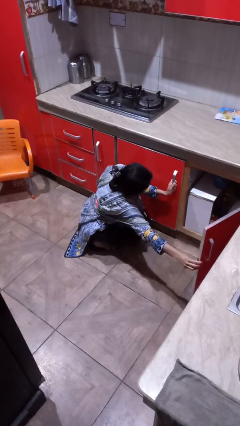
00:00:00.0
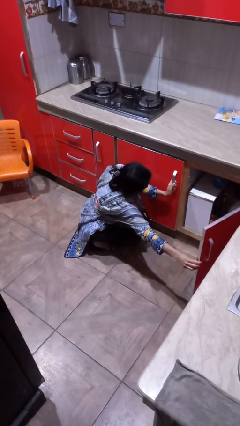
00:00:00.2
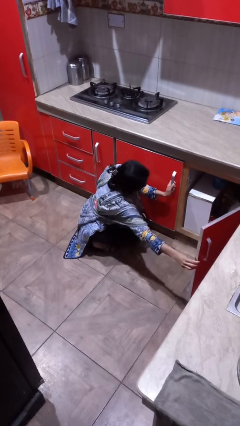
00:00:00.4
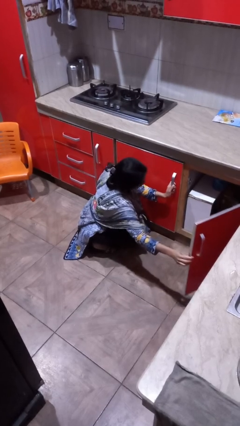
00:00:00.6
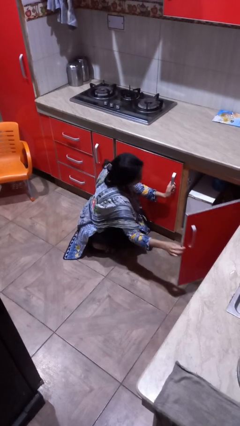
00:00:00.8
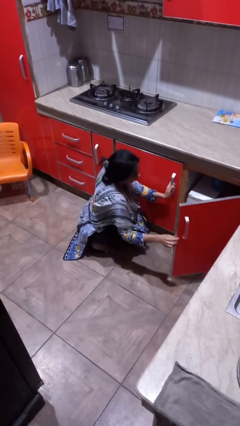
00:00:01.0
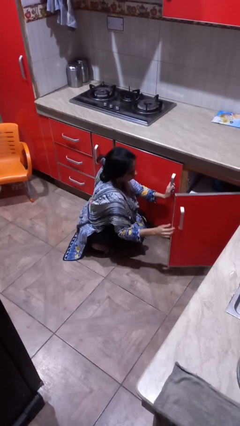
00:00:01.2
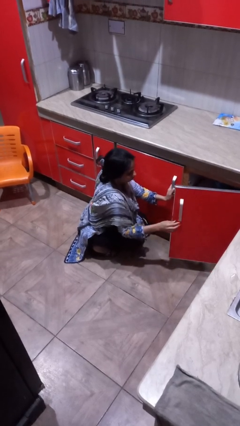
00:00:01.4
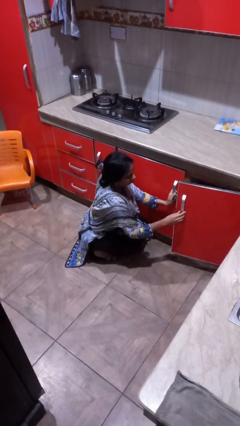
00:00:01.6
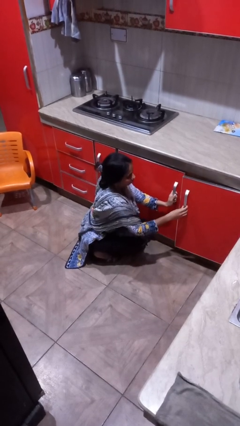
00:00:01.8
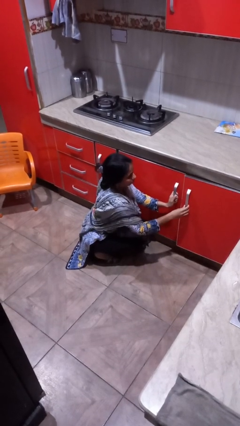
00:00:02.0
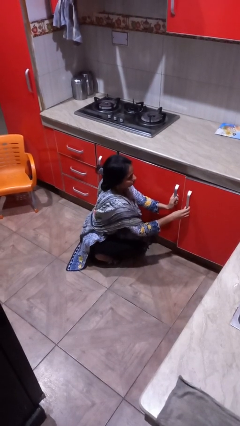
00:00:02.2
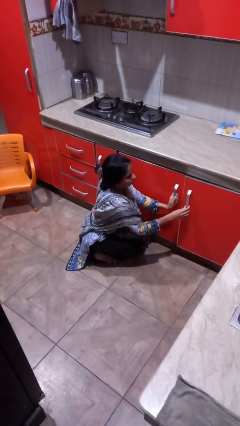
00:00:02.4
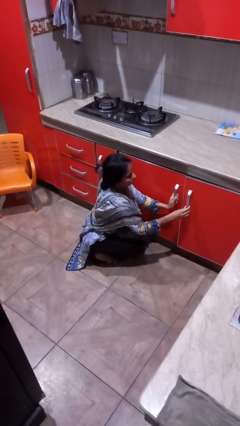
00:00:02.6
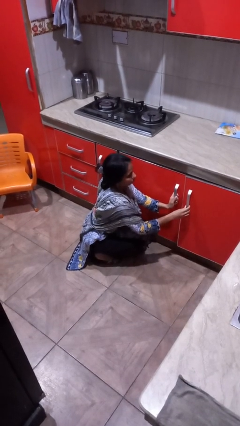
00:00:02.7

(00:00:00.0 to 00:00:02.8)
person closes cabinet

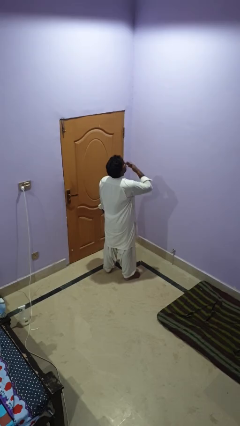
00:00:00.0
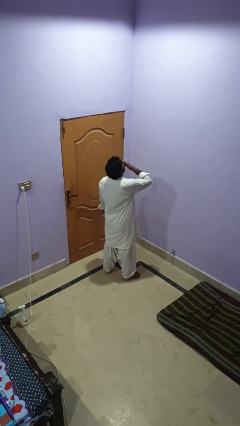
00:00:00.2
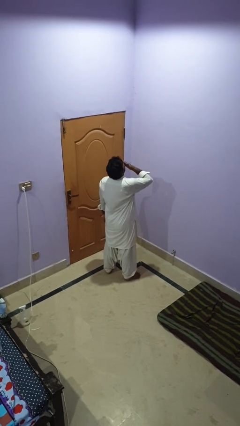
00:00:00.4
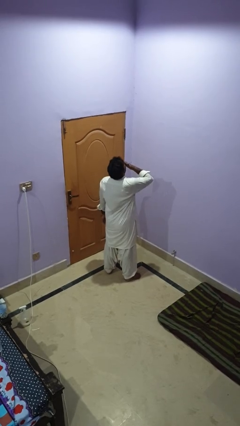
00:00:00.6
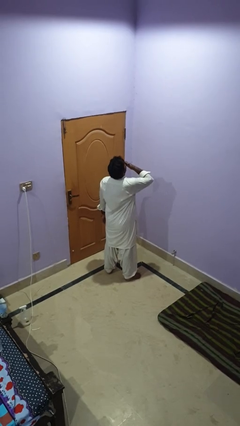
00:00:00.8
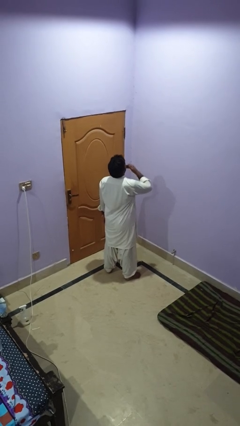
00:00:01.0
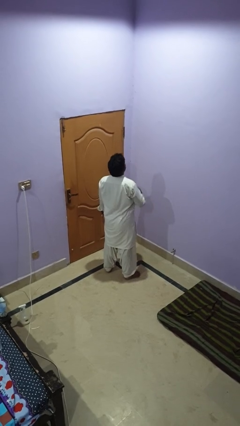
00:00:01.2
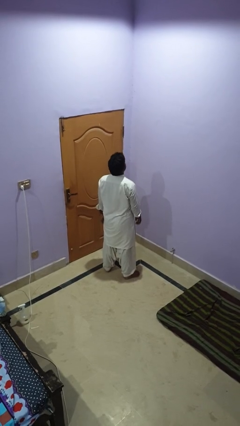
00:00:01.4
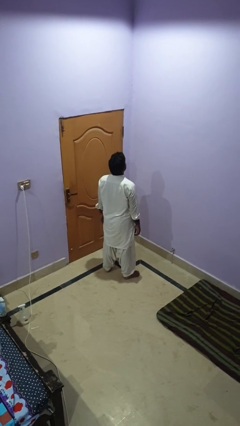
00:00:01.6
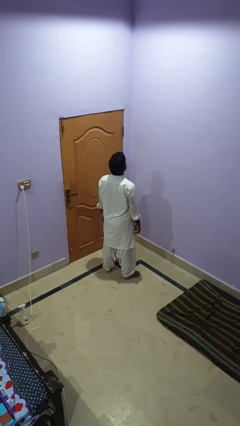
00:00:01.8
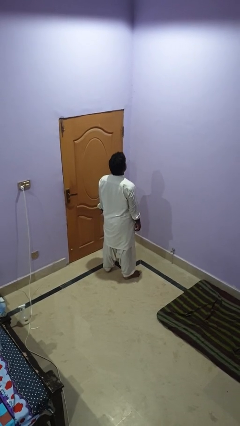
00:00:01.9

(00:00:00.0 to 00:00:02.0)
person yawns

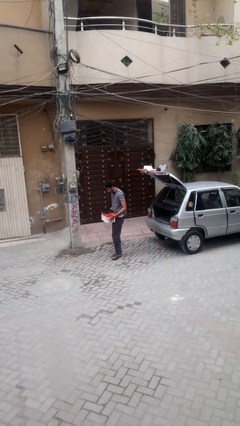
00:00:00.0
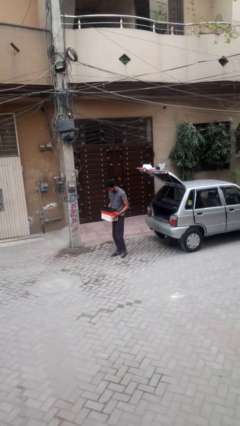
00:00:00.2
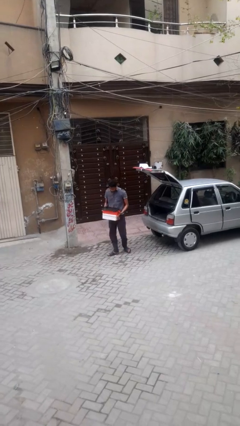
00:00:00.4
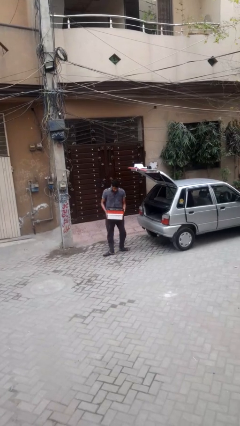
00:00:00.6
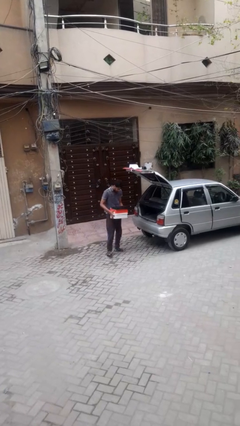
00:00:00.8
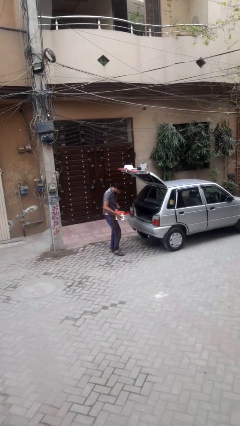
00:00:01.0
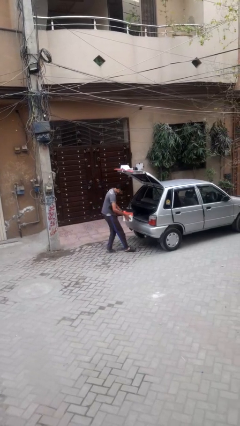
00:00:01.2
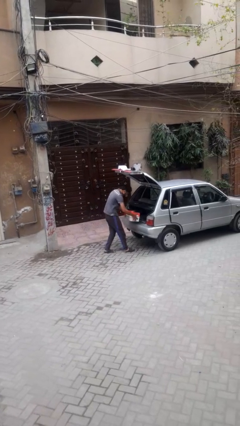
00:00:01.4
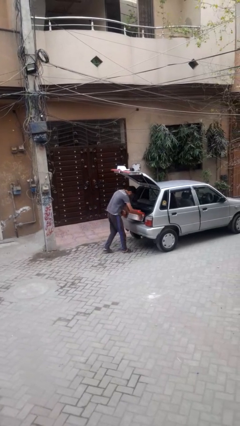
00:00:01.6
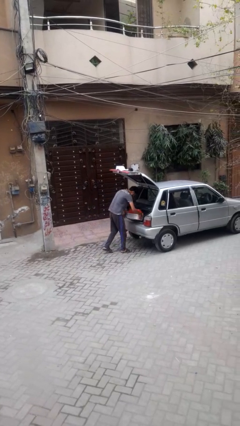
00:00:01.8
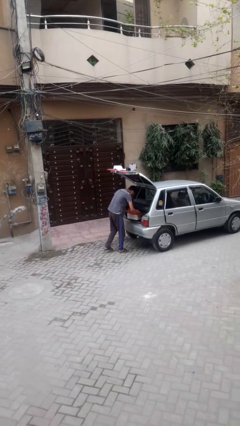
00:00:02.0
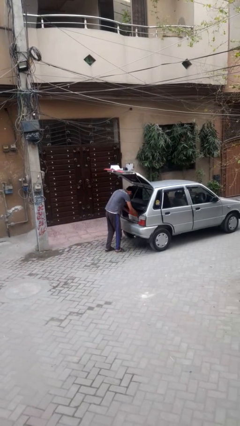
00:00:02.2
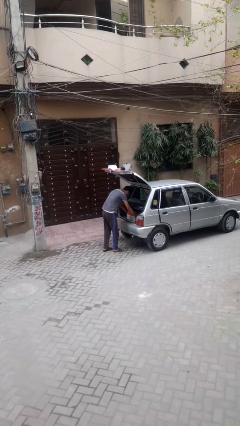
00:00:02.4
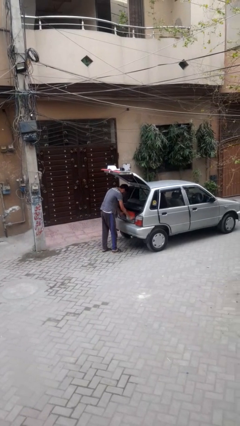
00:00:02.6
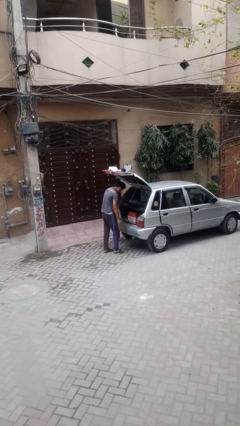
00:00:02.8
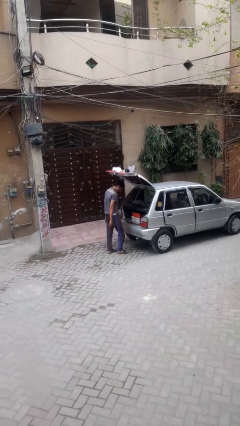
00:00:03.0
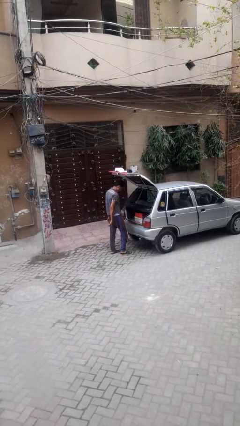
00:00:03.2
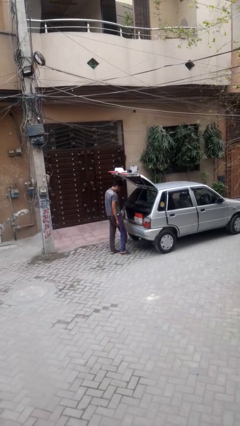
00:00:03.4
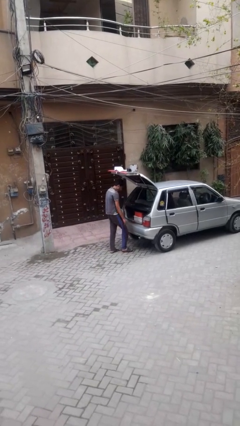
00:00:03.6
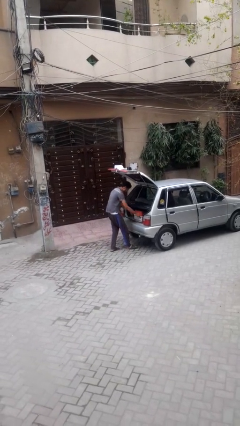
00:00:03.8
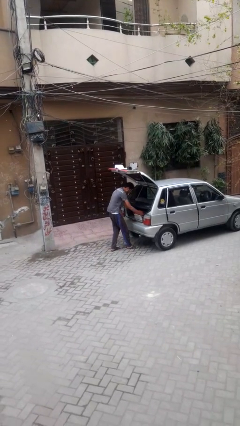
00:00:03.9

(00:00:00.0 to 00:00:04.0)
person loads car

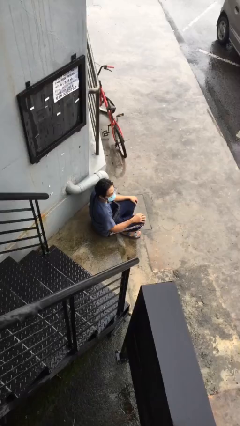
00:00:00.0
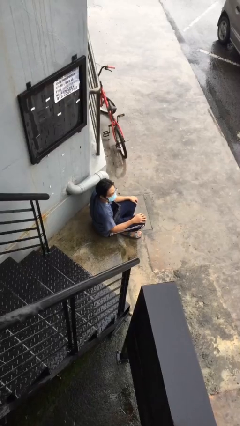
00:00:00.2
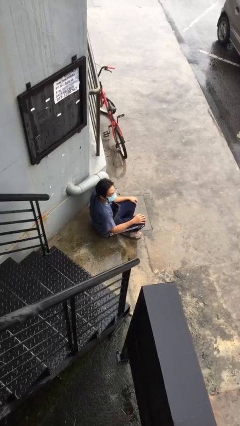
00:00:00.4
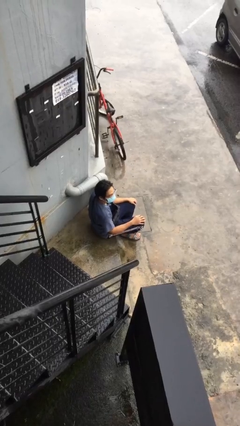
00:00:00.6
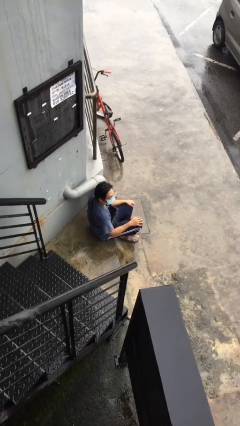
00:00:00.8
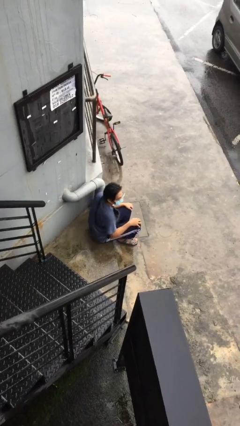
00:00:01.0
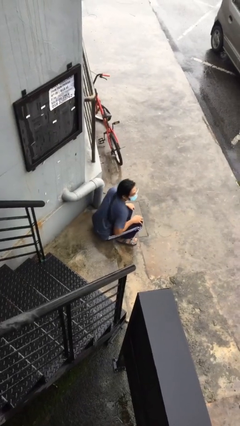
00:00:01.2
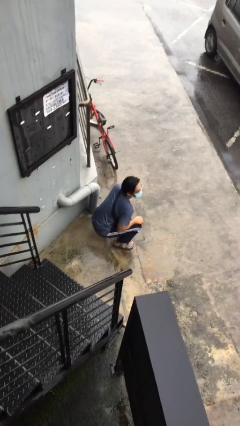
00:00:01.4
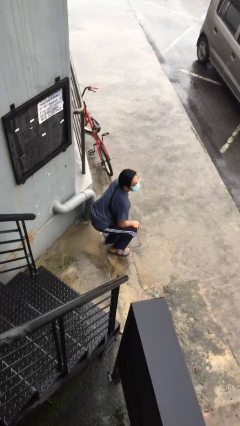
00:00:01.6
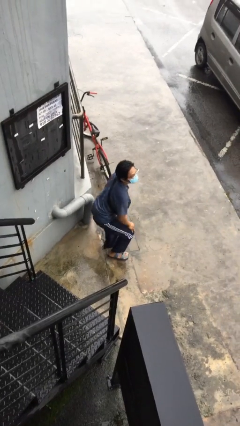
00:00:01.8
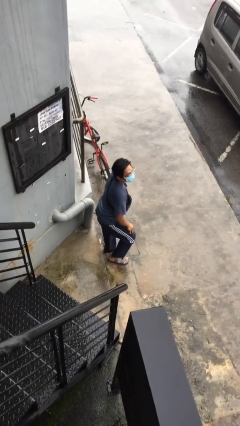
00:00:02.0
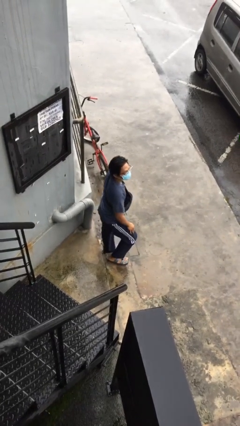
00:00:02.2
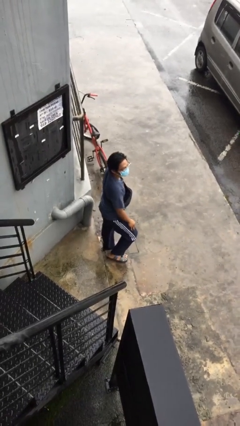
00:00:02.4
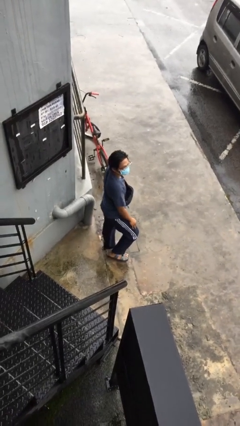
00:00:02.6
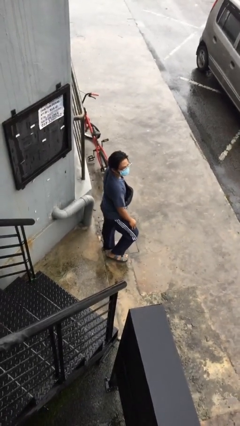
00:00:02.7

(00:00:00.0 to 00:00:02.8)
person stands up

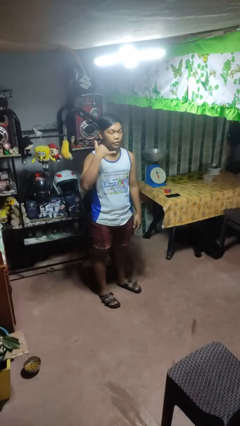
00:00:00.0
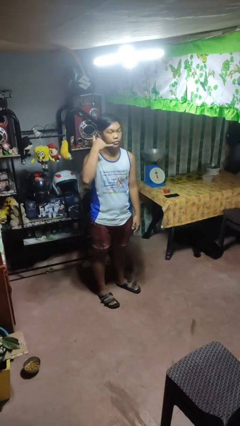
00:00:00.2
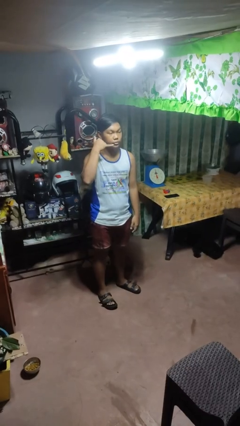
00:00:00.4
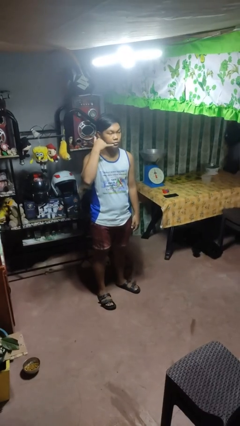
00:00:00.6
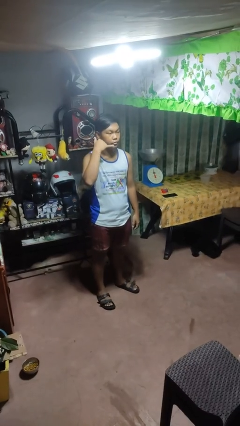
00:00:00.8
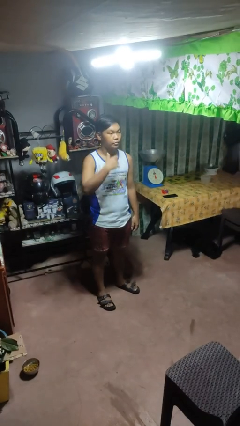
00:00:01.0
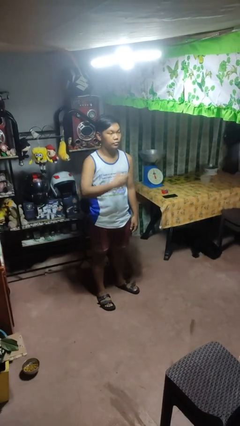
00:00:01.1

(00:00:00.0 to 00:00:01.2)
person gestures call me

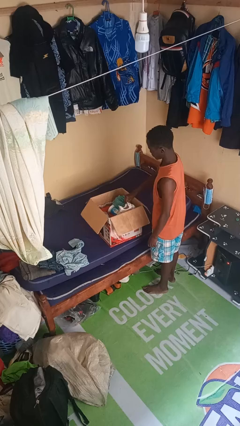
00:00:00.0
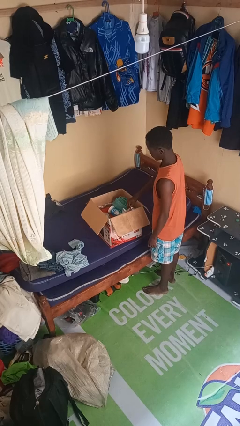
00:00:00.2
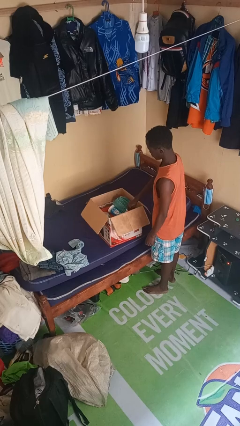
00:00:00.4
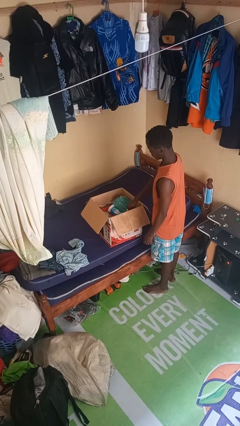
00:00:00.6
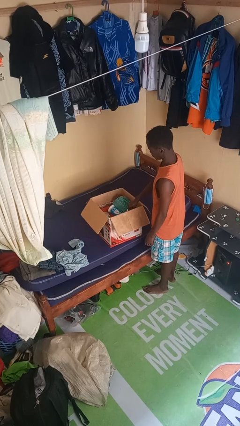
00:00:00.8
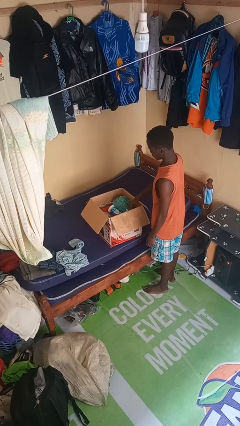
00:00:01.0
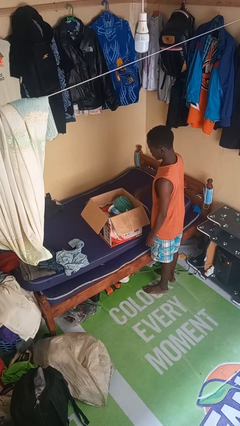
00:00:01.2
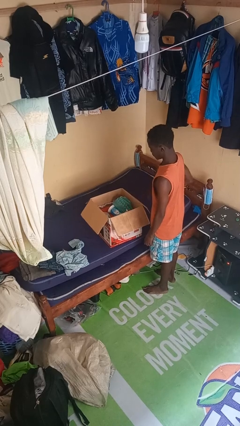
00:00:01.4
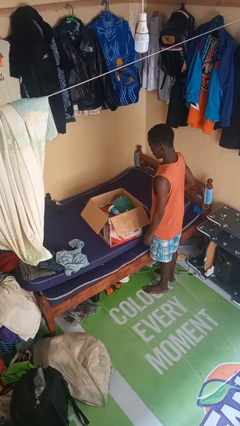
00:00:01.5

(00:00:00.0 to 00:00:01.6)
person puts object into box

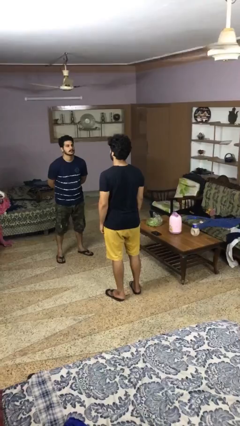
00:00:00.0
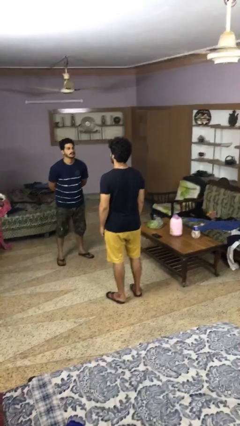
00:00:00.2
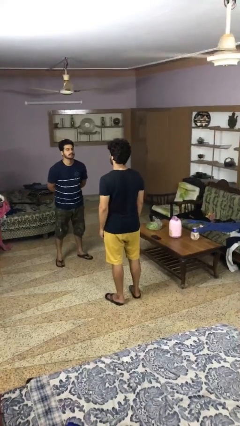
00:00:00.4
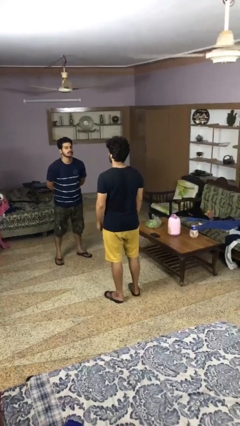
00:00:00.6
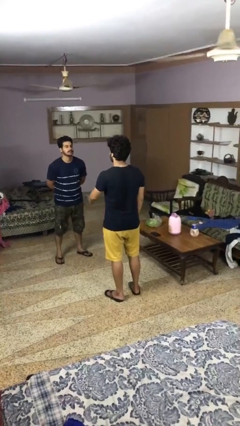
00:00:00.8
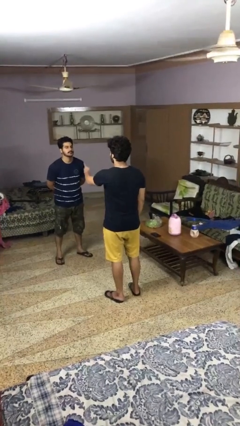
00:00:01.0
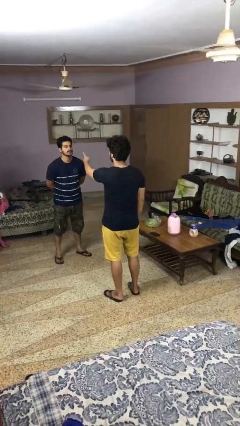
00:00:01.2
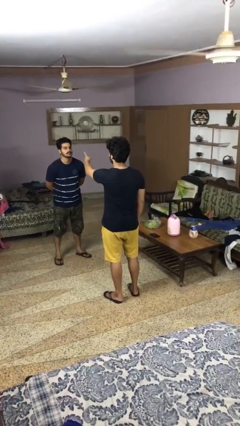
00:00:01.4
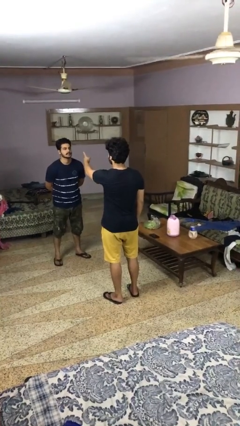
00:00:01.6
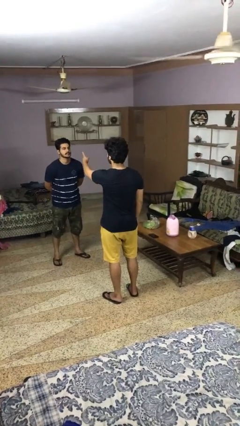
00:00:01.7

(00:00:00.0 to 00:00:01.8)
person points at person

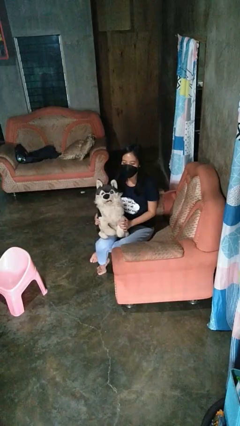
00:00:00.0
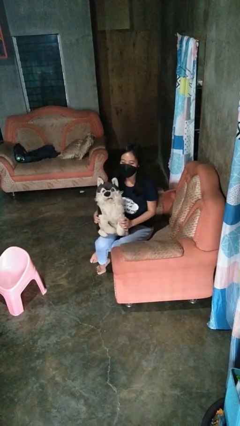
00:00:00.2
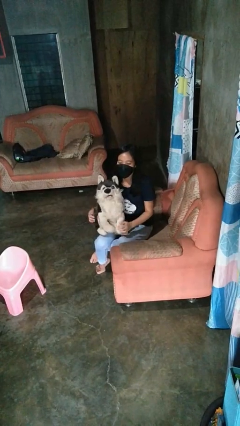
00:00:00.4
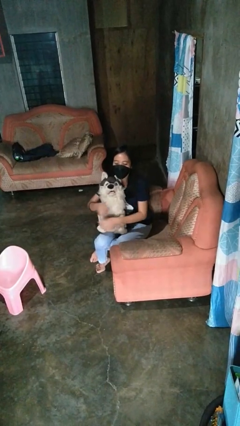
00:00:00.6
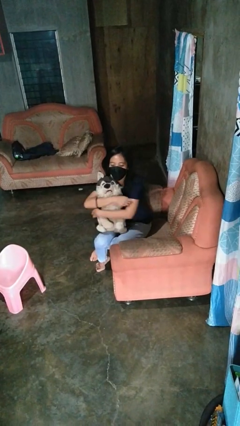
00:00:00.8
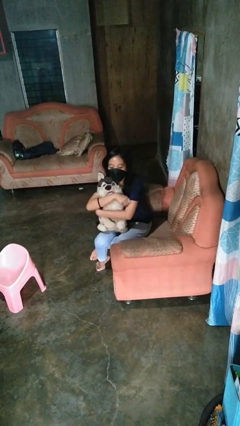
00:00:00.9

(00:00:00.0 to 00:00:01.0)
person hugs stuffed animal
